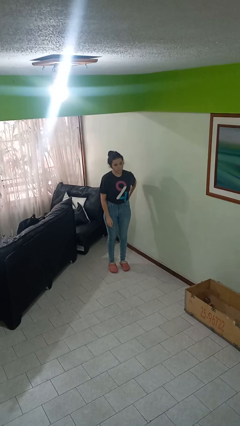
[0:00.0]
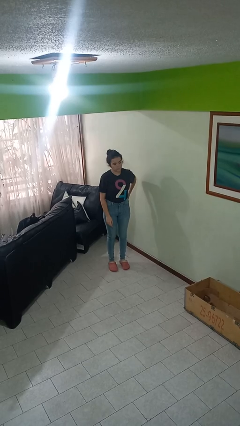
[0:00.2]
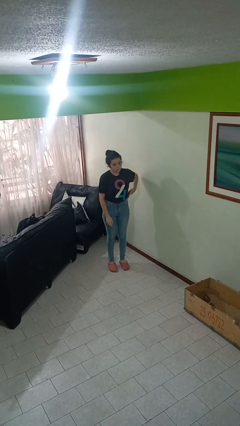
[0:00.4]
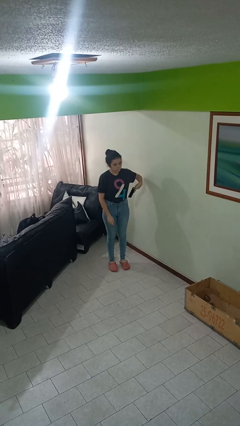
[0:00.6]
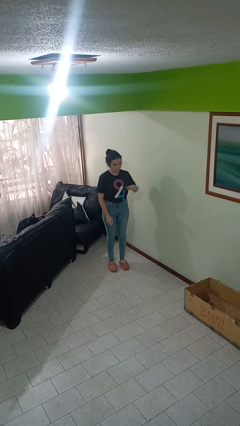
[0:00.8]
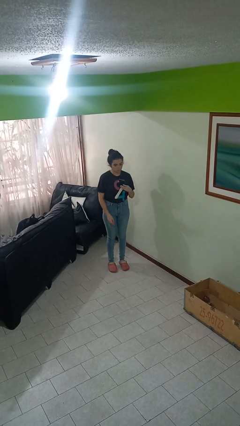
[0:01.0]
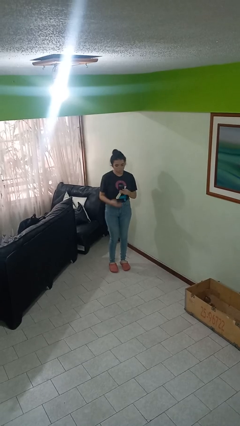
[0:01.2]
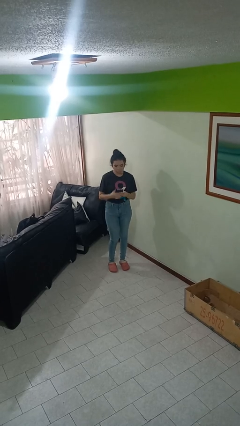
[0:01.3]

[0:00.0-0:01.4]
person takes phone from pocket

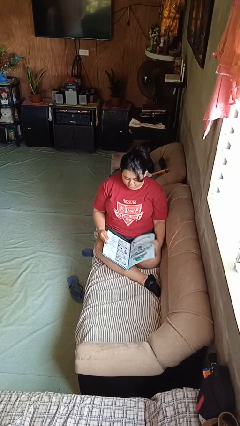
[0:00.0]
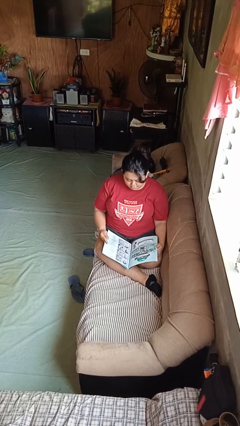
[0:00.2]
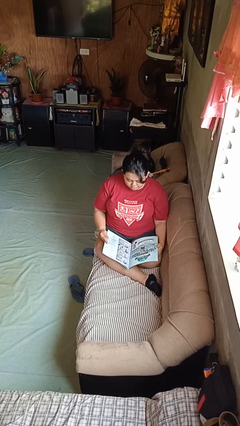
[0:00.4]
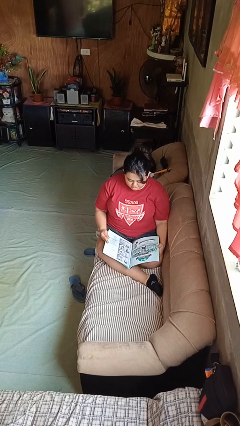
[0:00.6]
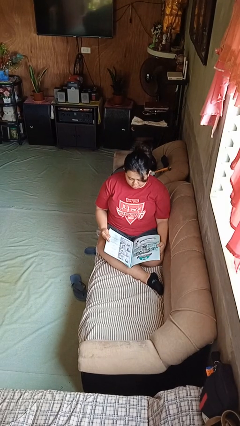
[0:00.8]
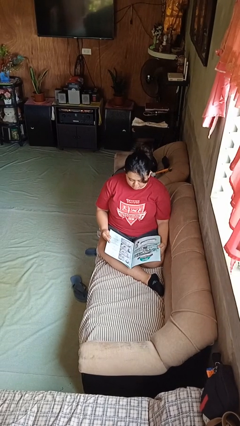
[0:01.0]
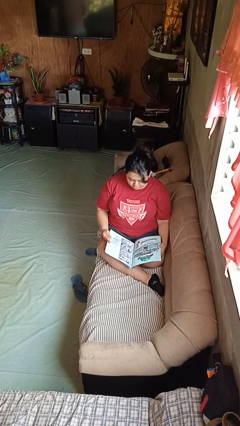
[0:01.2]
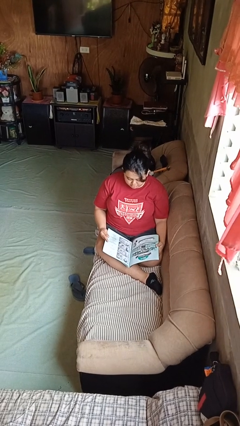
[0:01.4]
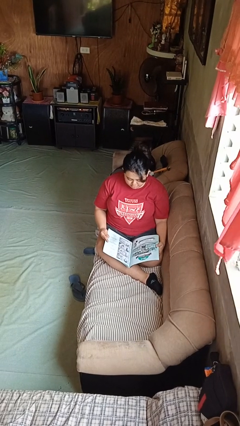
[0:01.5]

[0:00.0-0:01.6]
person reads magazine

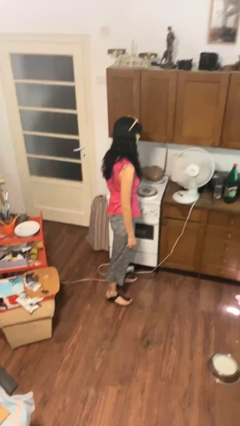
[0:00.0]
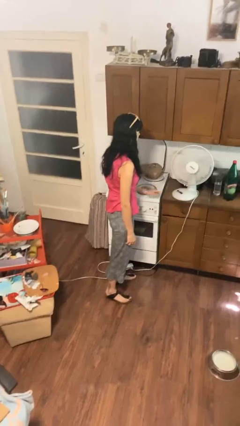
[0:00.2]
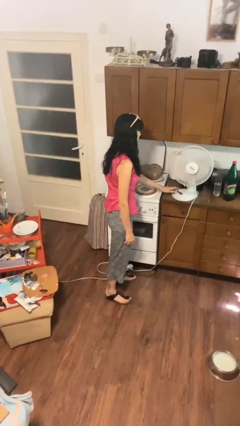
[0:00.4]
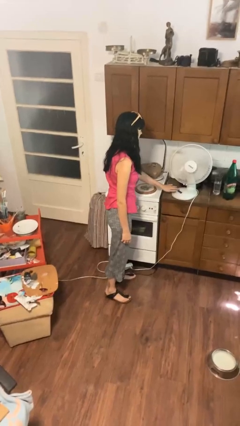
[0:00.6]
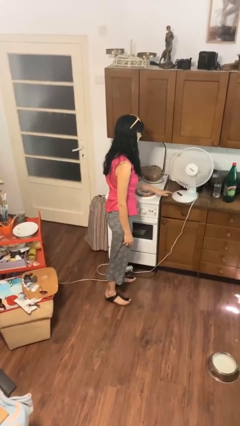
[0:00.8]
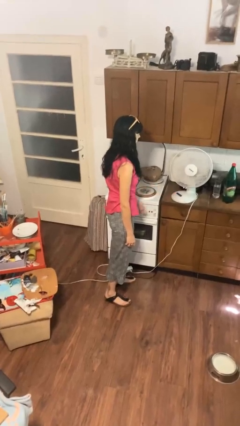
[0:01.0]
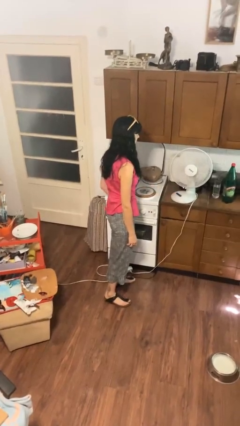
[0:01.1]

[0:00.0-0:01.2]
person turns off fan

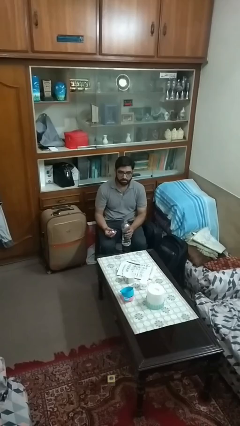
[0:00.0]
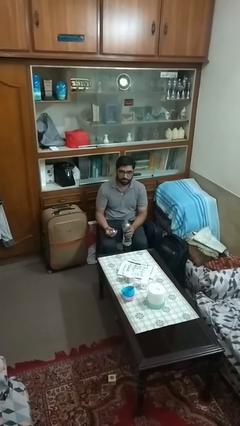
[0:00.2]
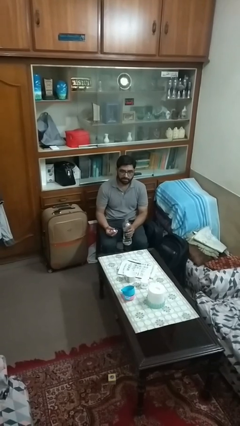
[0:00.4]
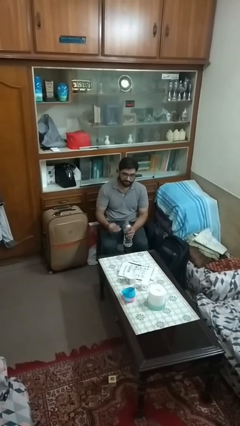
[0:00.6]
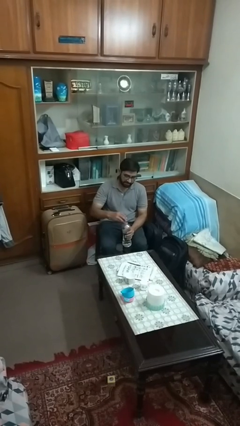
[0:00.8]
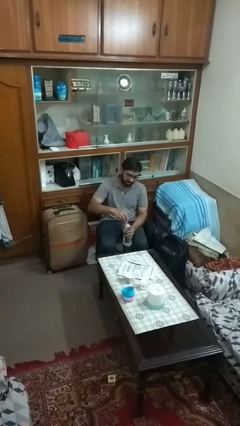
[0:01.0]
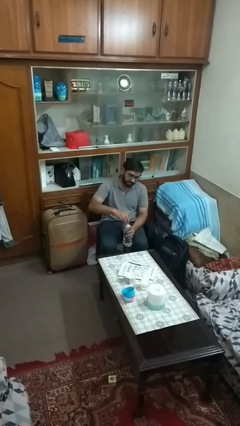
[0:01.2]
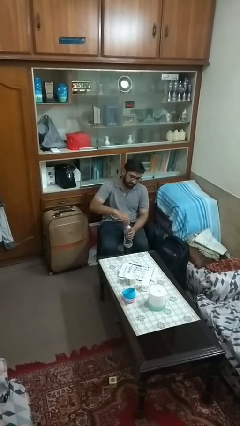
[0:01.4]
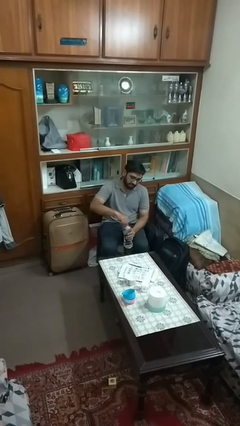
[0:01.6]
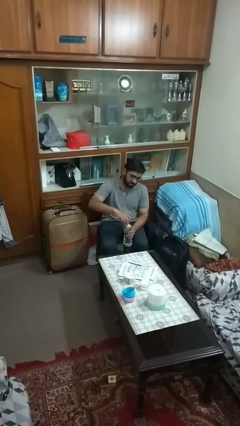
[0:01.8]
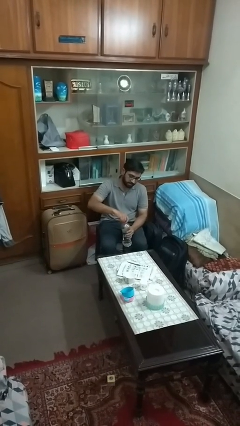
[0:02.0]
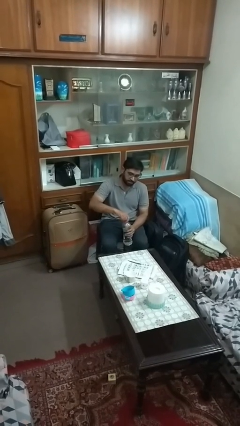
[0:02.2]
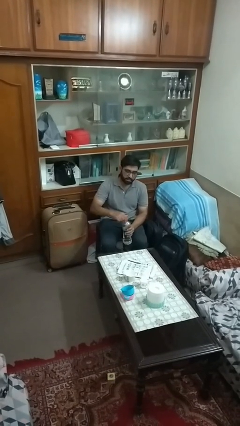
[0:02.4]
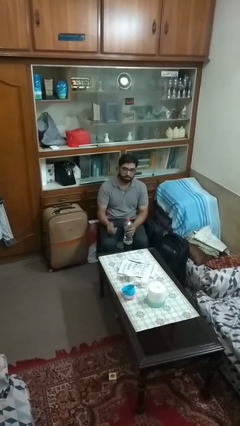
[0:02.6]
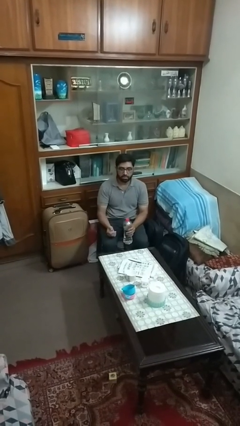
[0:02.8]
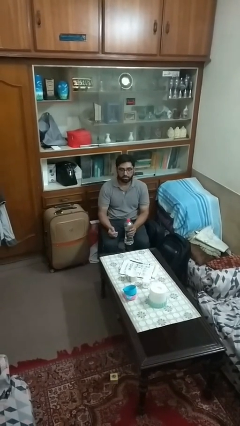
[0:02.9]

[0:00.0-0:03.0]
person screws lid to bottle

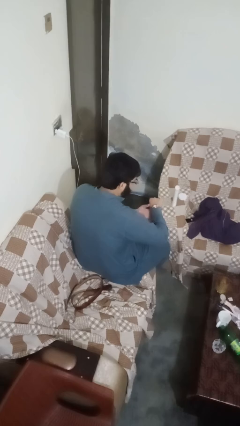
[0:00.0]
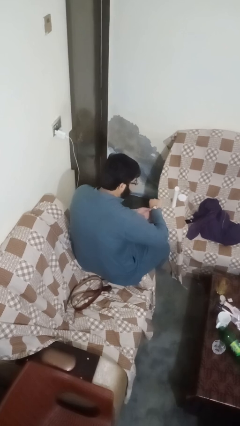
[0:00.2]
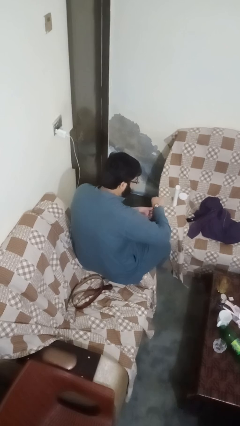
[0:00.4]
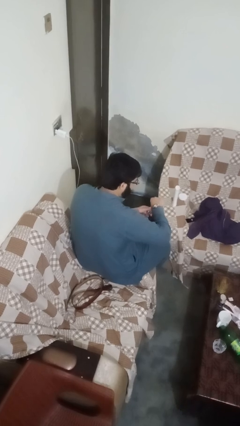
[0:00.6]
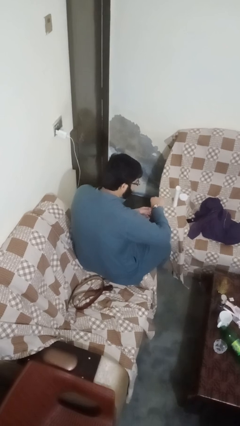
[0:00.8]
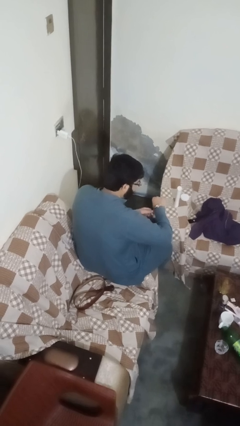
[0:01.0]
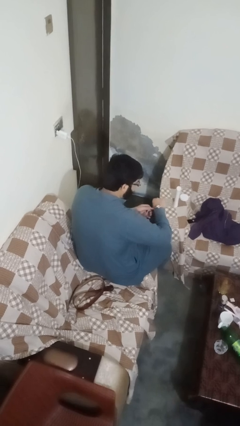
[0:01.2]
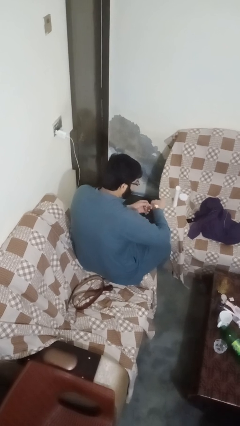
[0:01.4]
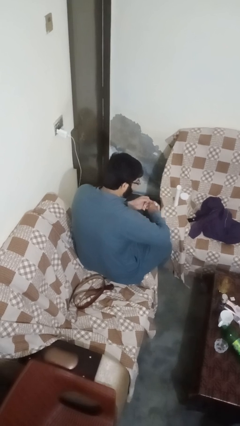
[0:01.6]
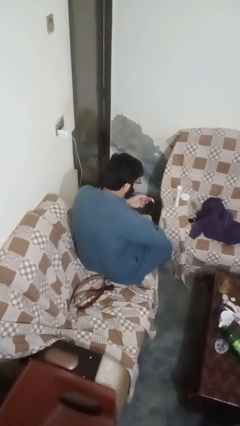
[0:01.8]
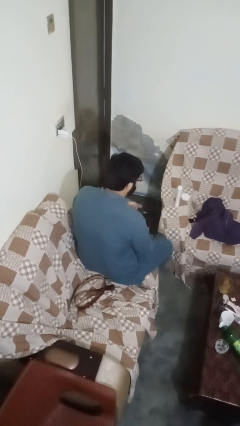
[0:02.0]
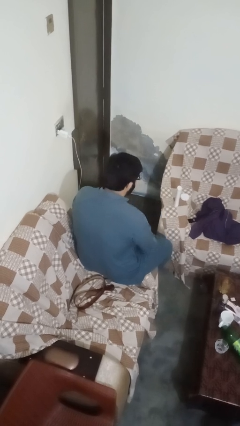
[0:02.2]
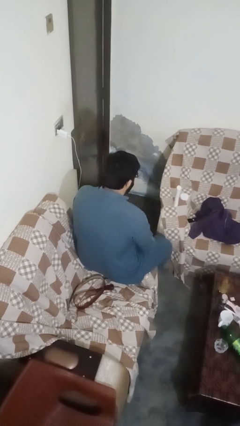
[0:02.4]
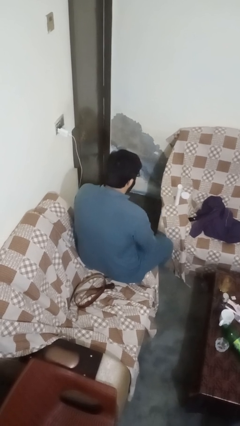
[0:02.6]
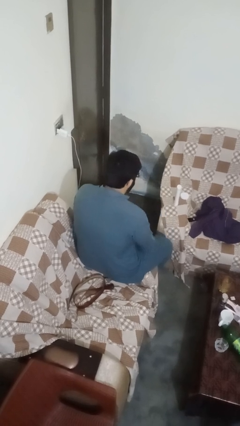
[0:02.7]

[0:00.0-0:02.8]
person takes off wristwatch

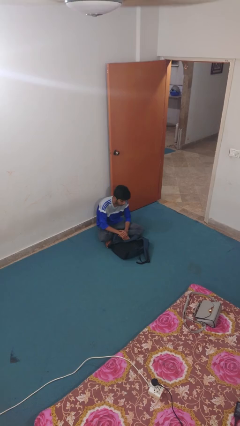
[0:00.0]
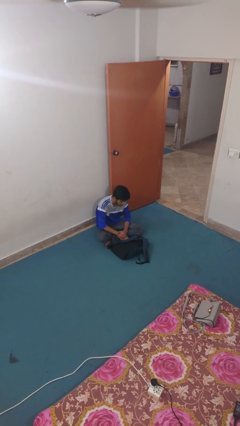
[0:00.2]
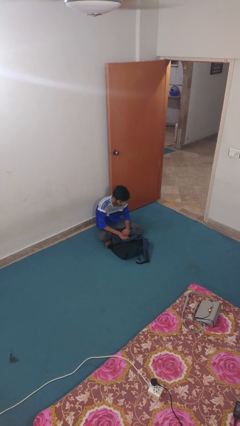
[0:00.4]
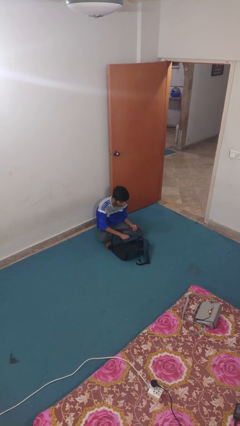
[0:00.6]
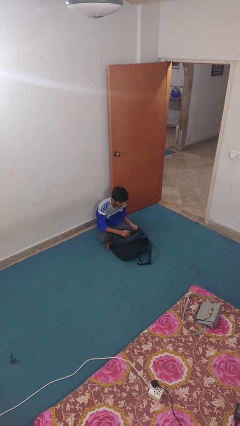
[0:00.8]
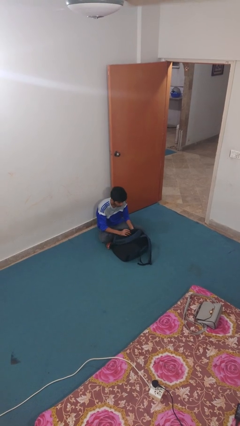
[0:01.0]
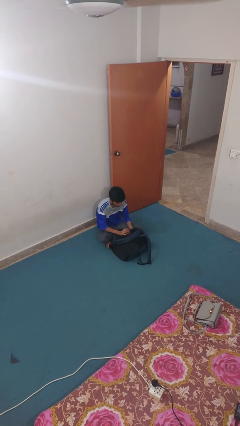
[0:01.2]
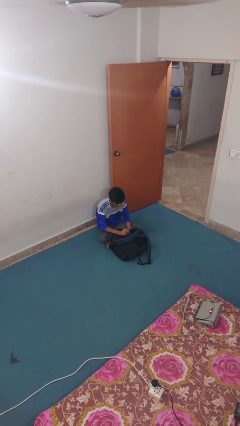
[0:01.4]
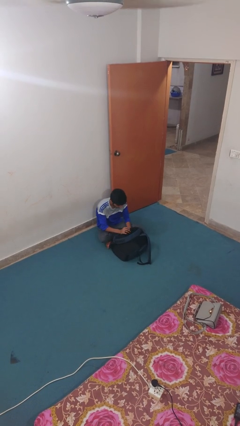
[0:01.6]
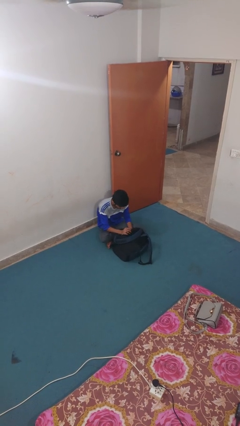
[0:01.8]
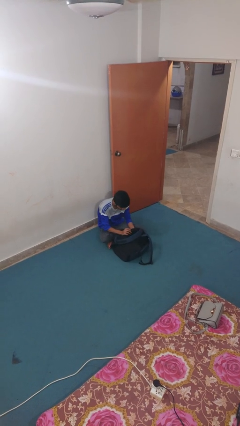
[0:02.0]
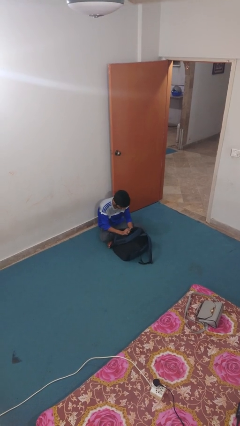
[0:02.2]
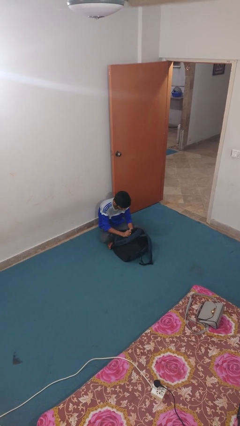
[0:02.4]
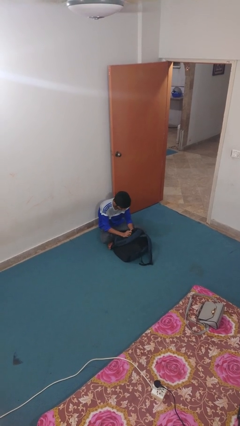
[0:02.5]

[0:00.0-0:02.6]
person searches in backpack

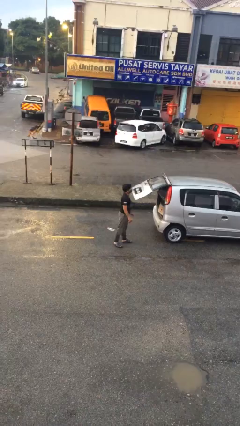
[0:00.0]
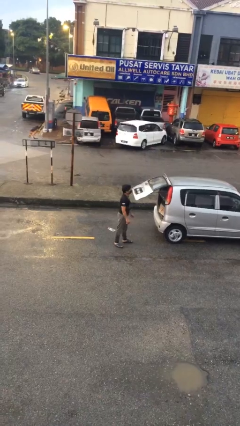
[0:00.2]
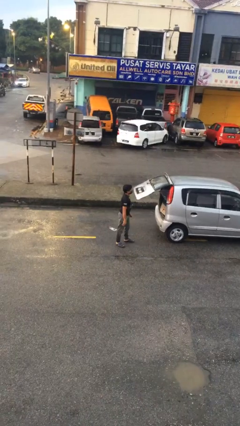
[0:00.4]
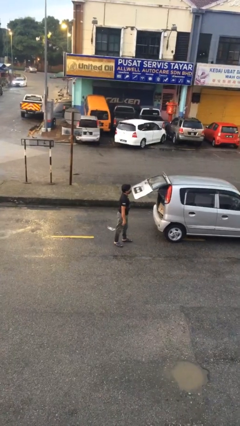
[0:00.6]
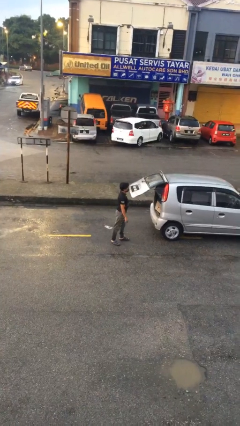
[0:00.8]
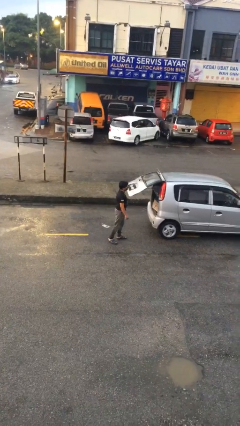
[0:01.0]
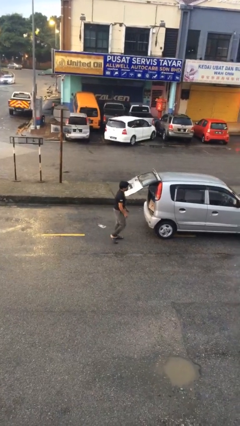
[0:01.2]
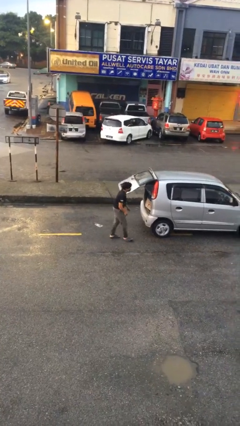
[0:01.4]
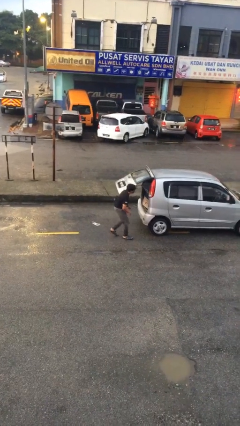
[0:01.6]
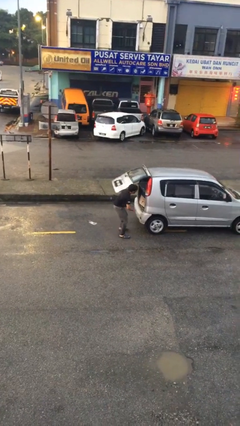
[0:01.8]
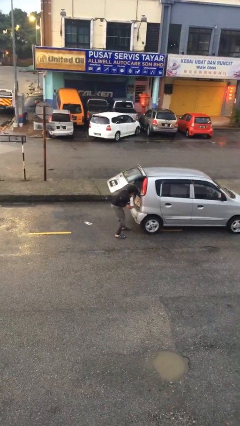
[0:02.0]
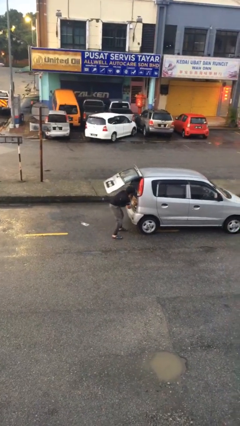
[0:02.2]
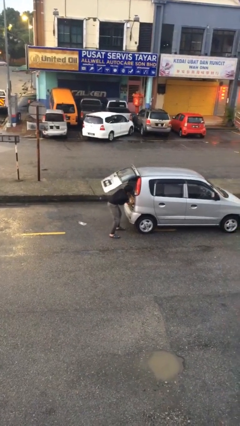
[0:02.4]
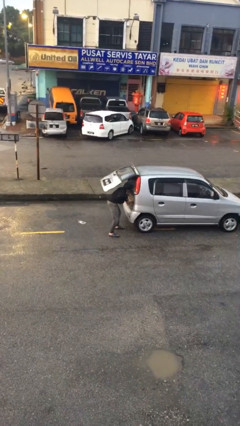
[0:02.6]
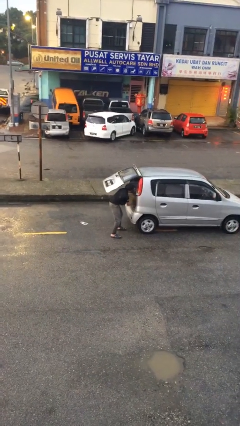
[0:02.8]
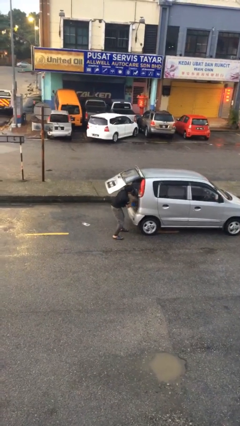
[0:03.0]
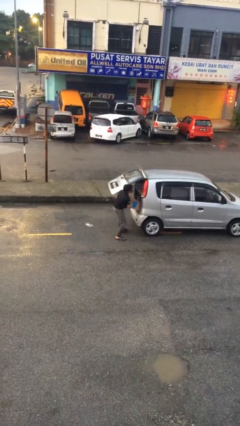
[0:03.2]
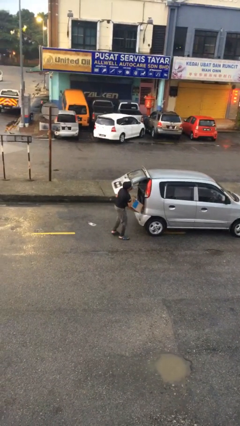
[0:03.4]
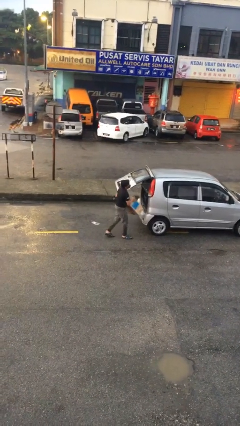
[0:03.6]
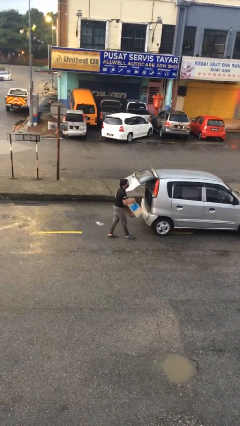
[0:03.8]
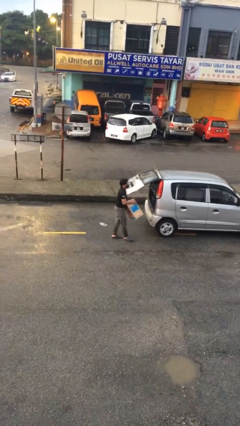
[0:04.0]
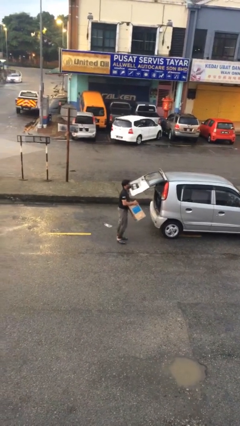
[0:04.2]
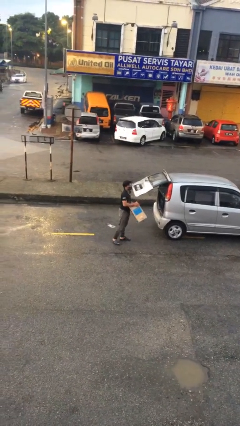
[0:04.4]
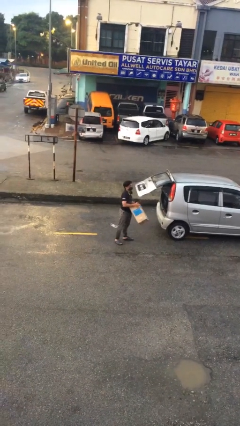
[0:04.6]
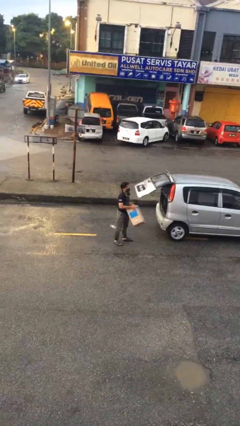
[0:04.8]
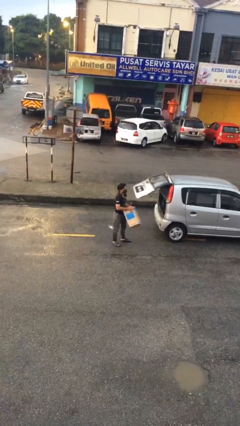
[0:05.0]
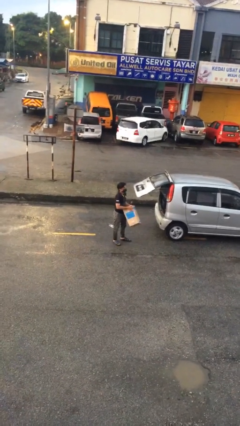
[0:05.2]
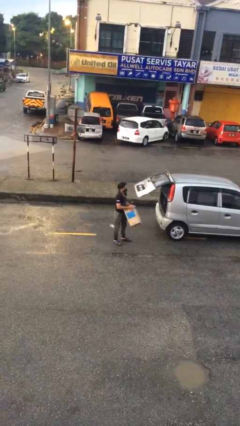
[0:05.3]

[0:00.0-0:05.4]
person unloads car
